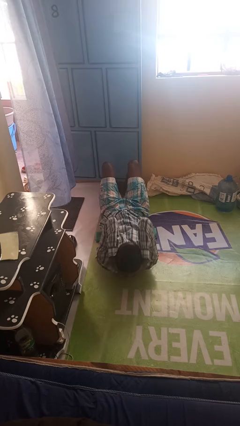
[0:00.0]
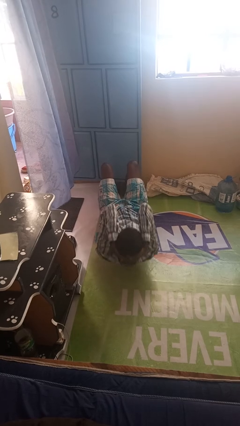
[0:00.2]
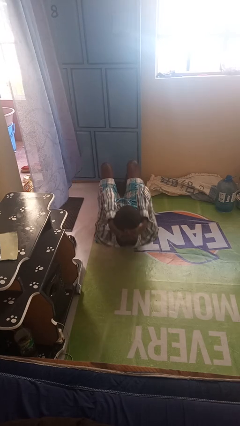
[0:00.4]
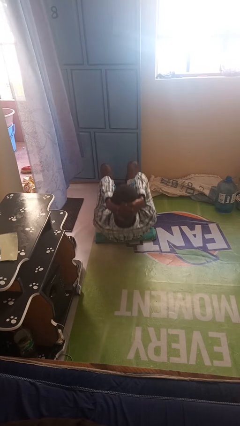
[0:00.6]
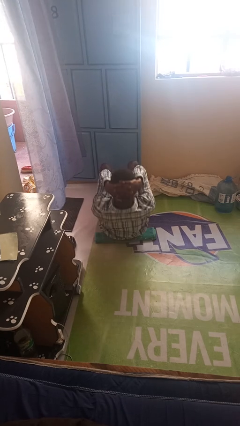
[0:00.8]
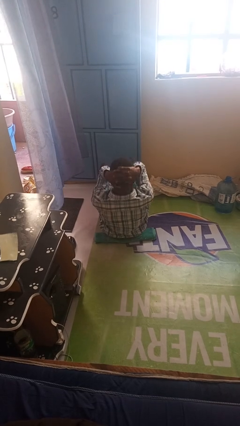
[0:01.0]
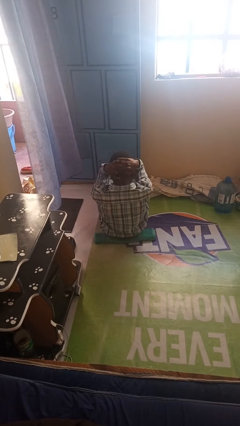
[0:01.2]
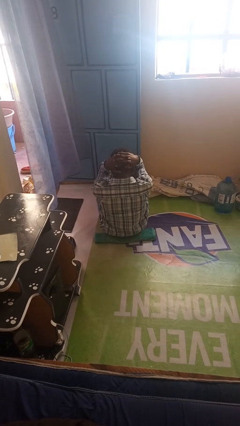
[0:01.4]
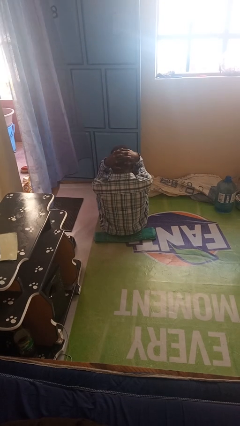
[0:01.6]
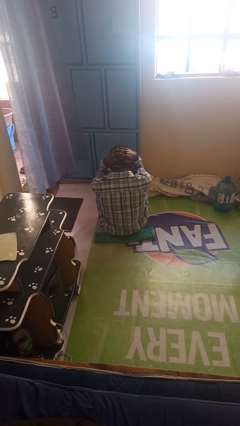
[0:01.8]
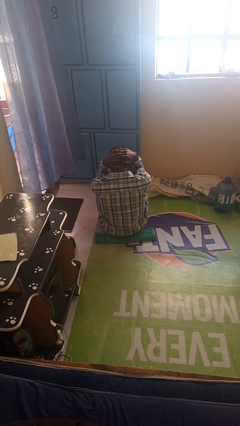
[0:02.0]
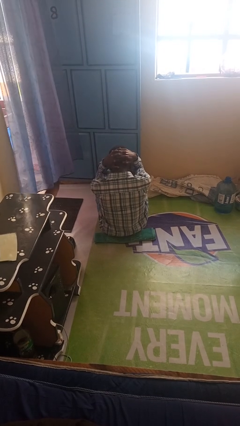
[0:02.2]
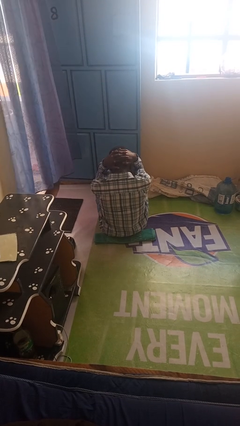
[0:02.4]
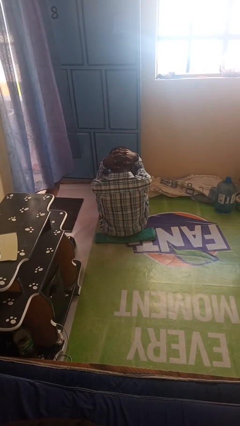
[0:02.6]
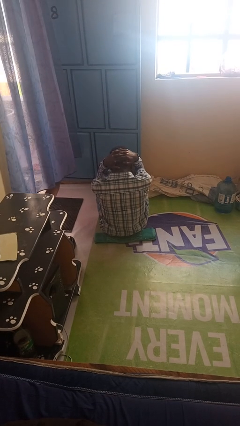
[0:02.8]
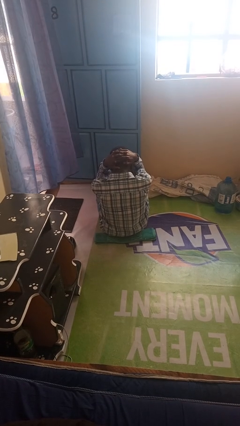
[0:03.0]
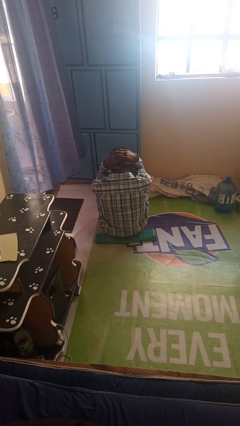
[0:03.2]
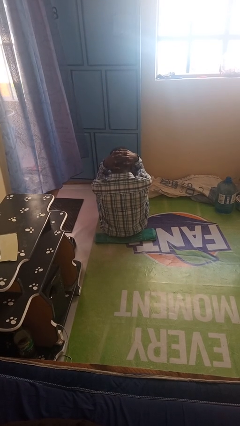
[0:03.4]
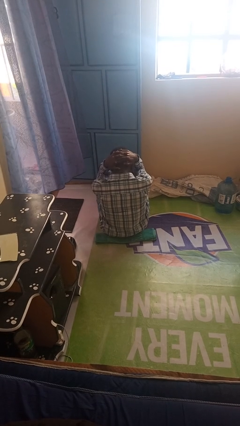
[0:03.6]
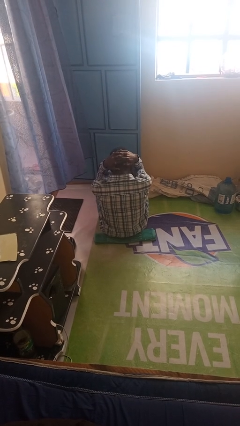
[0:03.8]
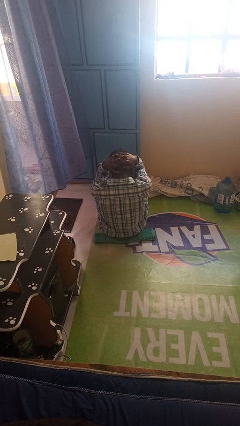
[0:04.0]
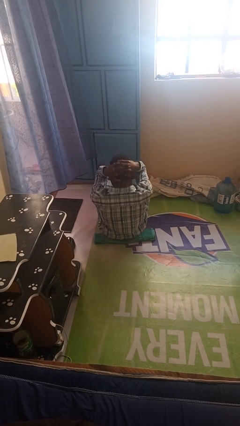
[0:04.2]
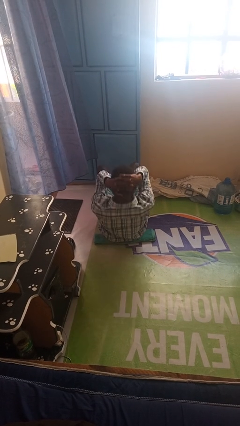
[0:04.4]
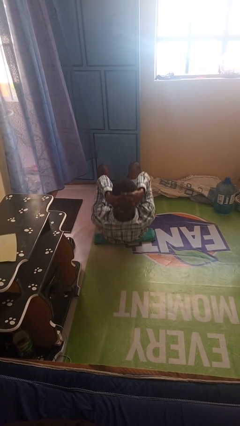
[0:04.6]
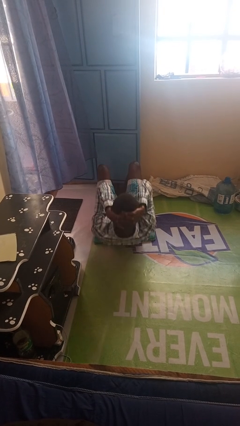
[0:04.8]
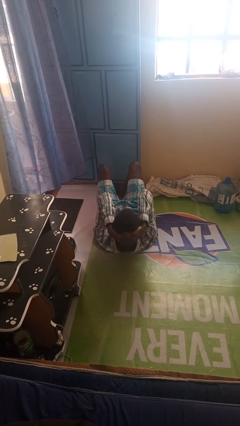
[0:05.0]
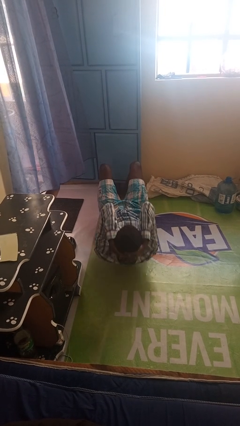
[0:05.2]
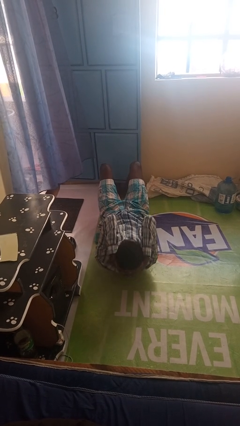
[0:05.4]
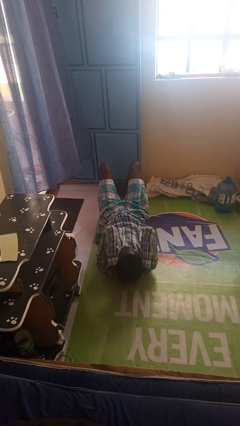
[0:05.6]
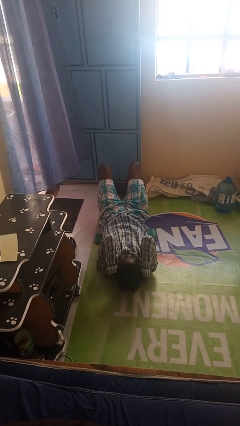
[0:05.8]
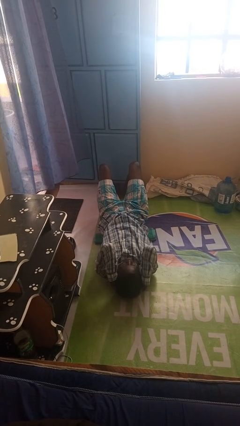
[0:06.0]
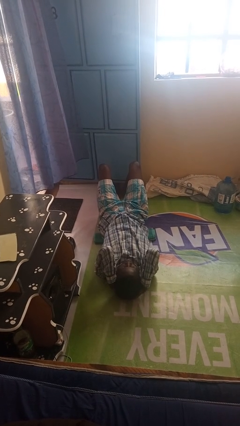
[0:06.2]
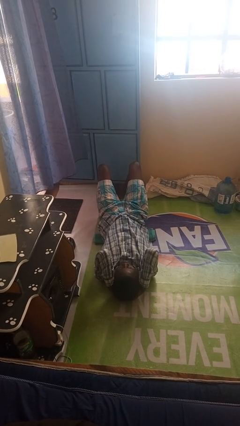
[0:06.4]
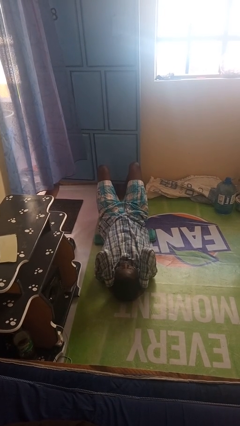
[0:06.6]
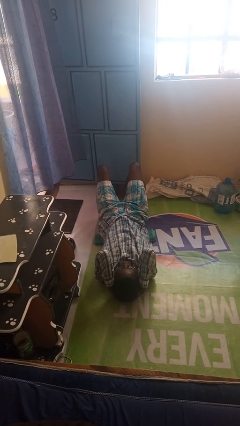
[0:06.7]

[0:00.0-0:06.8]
person exercises with situp

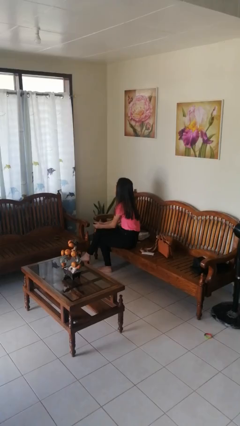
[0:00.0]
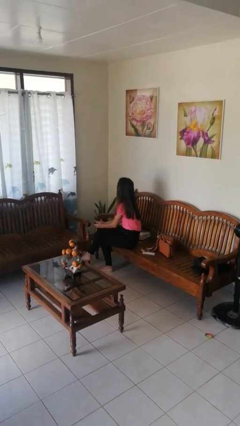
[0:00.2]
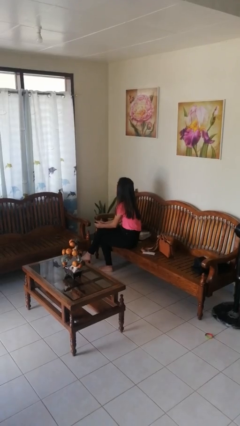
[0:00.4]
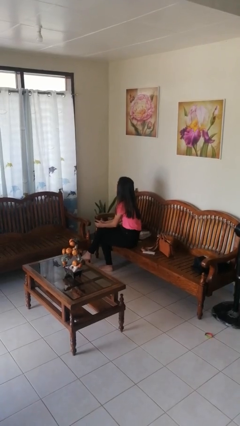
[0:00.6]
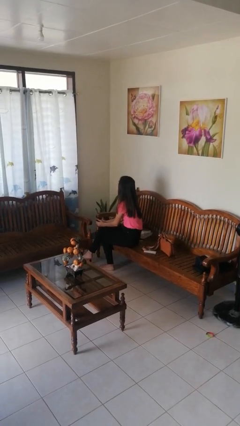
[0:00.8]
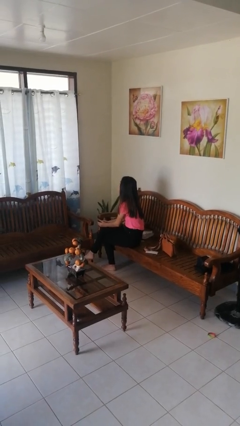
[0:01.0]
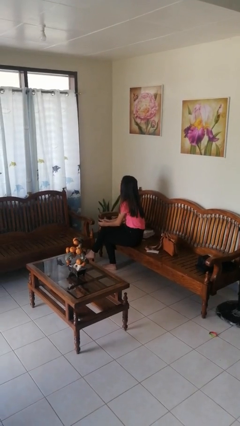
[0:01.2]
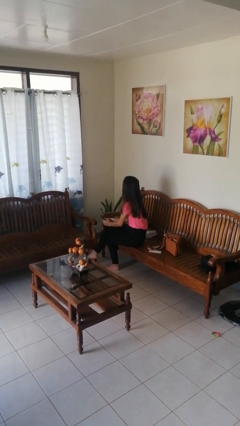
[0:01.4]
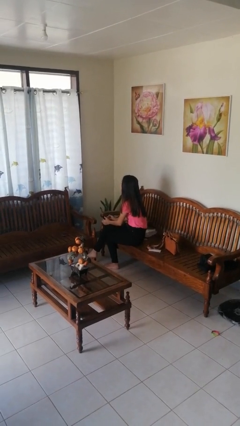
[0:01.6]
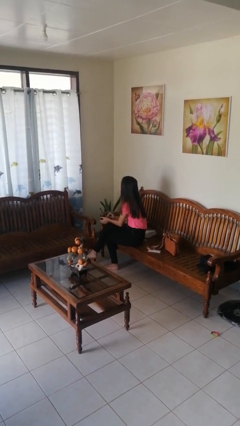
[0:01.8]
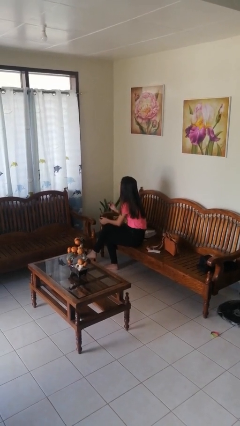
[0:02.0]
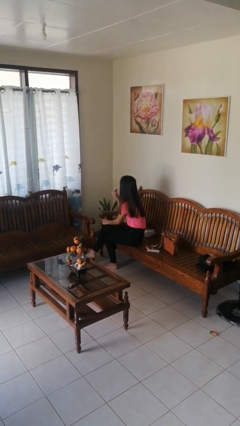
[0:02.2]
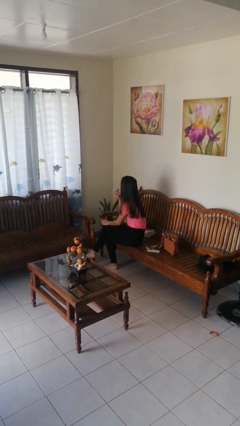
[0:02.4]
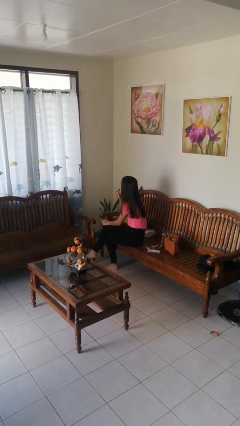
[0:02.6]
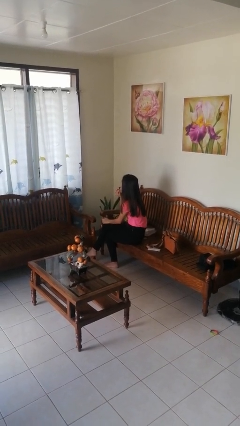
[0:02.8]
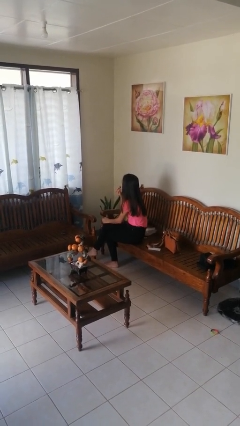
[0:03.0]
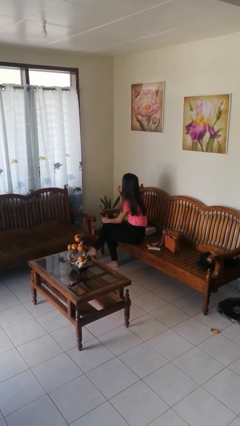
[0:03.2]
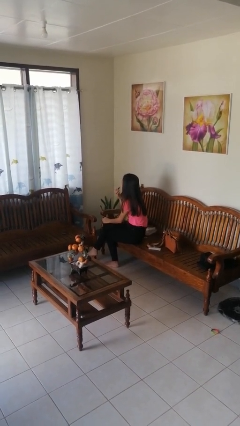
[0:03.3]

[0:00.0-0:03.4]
person applies lip makeup

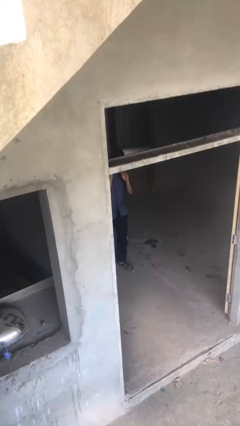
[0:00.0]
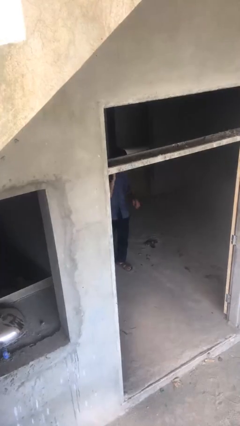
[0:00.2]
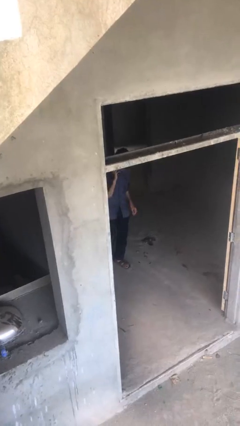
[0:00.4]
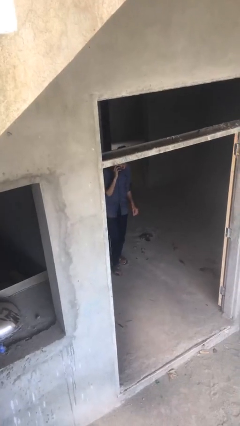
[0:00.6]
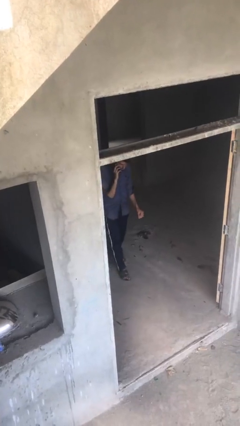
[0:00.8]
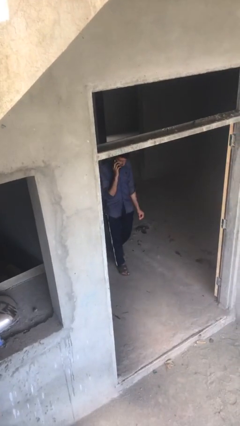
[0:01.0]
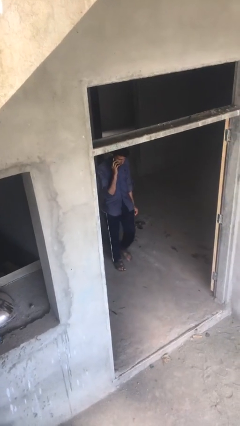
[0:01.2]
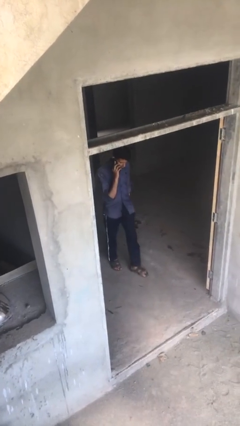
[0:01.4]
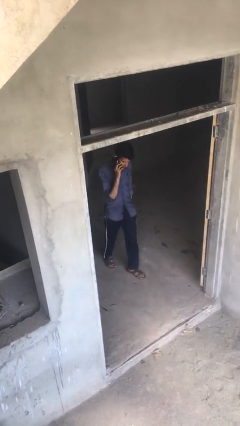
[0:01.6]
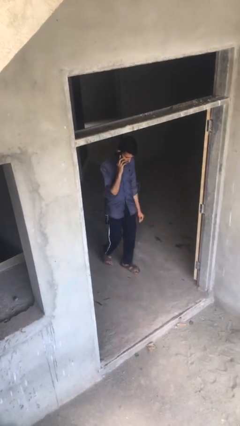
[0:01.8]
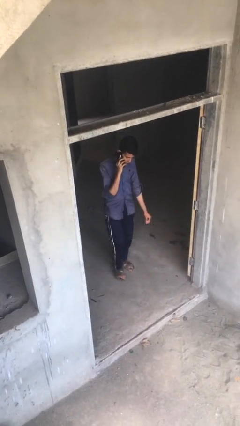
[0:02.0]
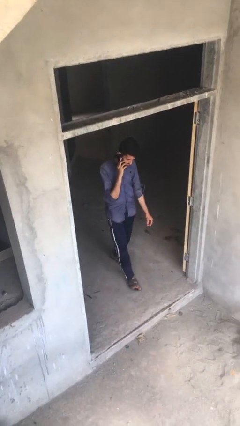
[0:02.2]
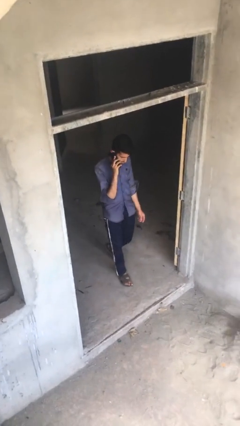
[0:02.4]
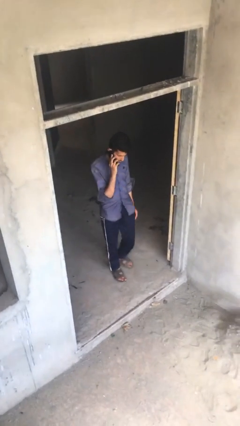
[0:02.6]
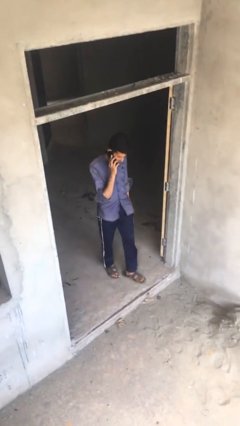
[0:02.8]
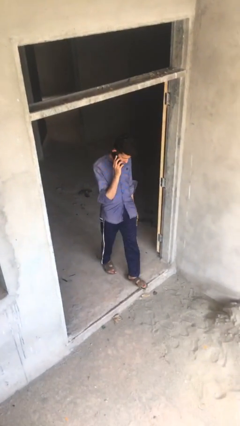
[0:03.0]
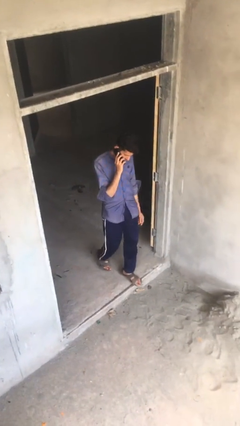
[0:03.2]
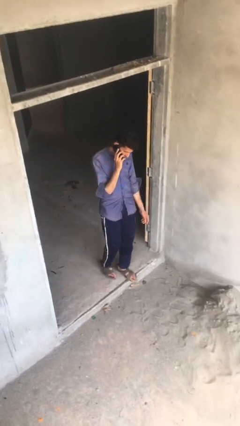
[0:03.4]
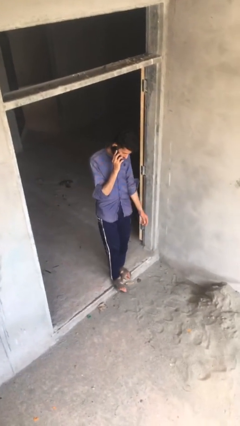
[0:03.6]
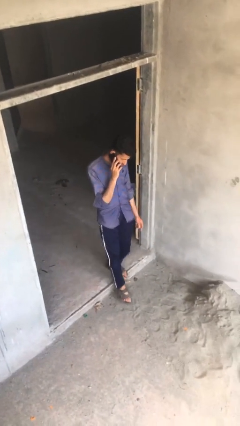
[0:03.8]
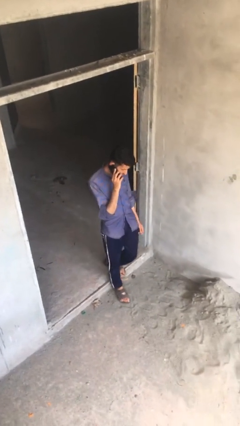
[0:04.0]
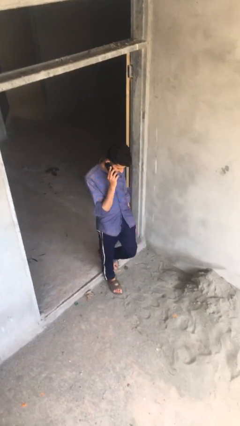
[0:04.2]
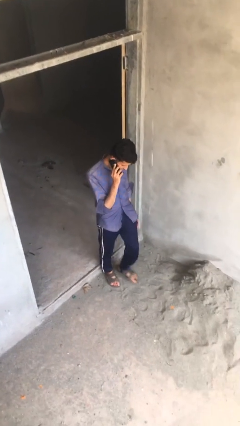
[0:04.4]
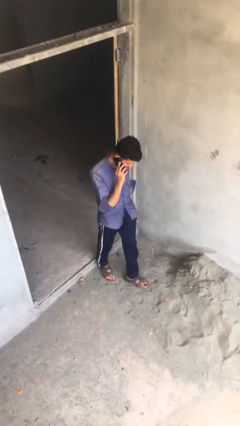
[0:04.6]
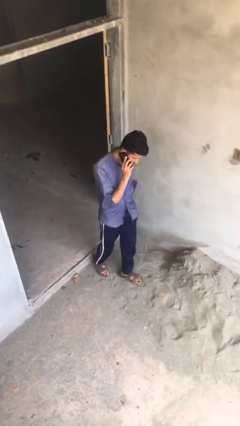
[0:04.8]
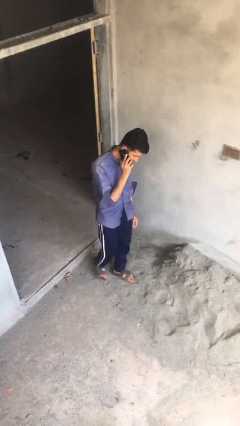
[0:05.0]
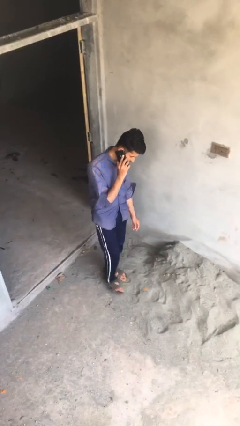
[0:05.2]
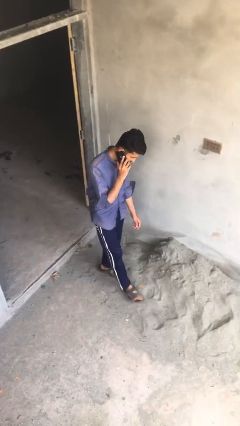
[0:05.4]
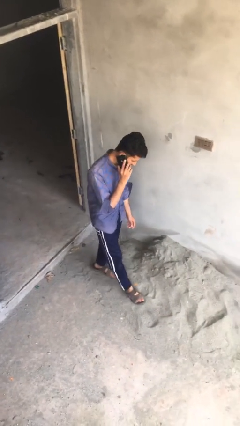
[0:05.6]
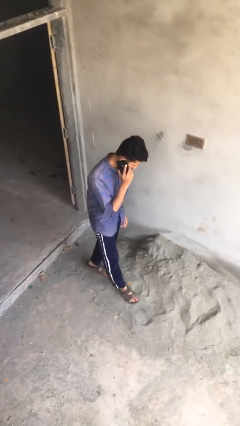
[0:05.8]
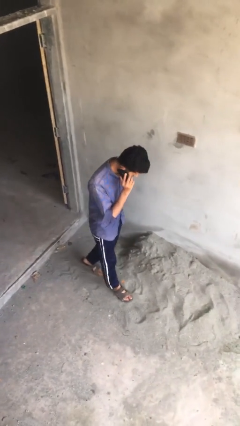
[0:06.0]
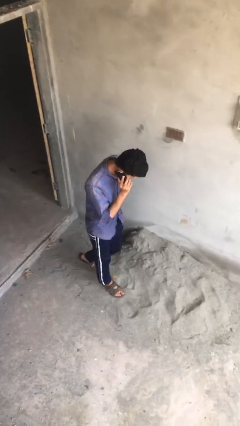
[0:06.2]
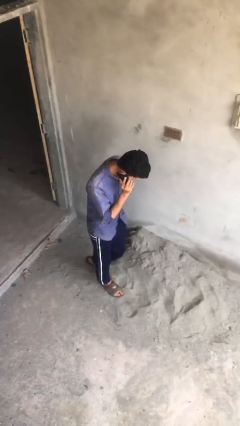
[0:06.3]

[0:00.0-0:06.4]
person enters scene through structure

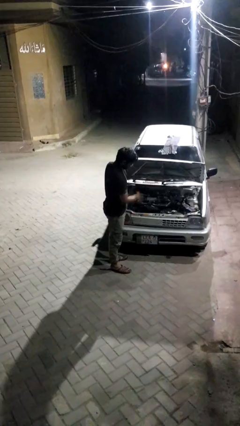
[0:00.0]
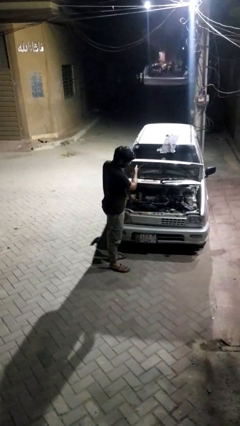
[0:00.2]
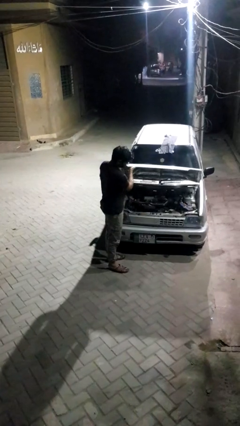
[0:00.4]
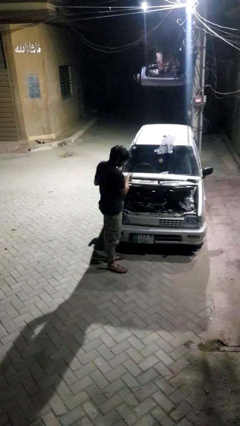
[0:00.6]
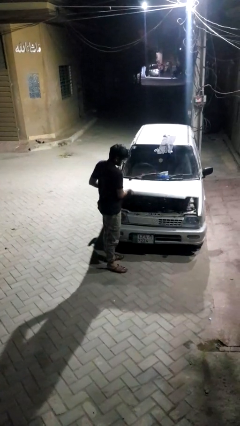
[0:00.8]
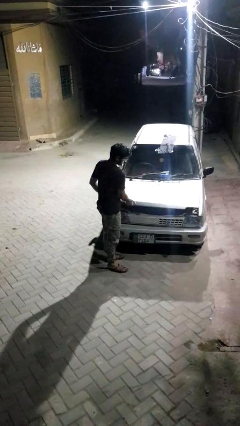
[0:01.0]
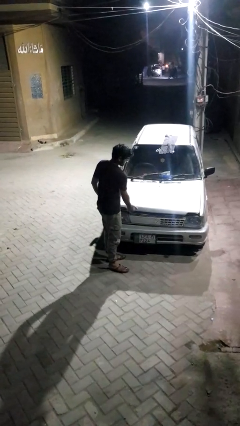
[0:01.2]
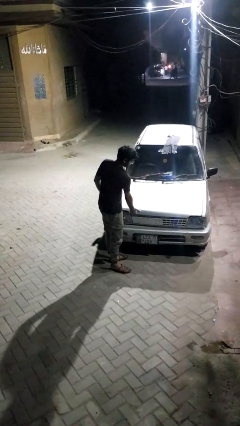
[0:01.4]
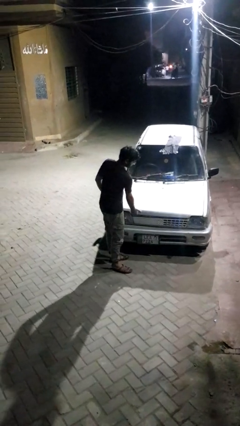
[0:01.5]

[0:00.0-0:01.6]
person closes car hood
